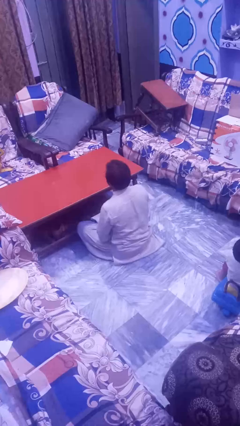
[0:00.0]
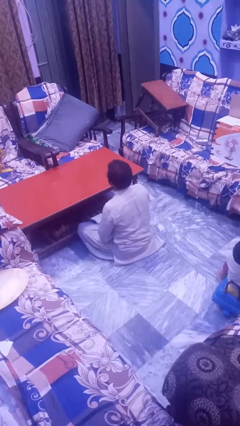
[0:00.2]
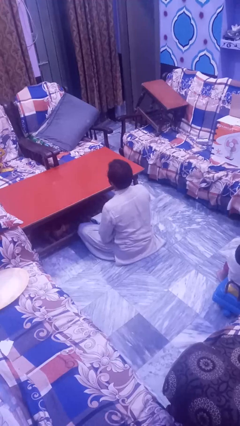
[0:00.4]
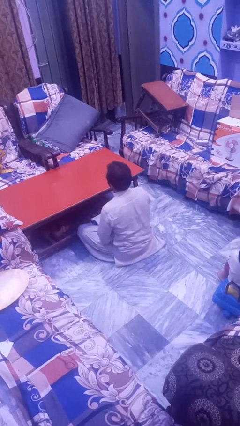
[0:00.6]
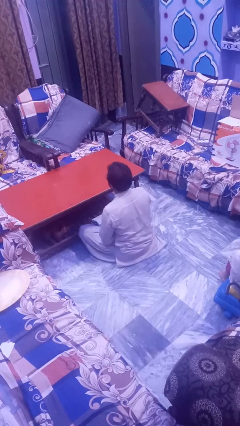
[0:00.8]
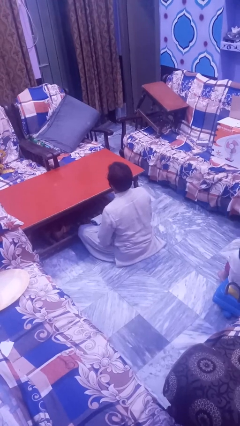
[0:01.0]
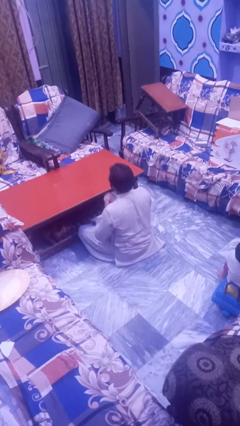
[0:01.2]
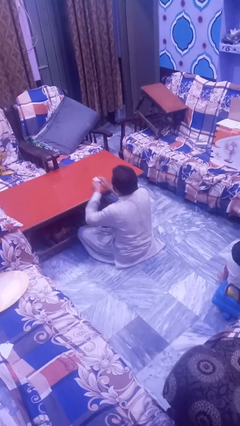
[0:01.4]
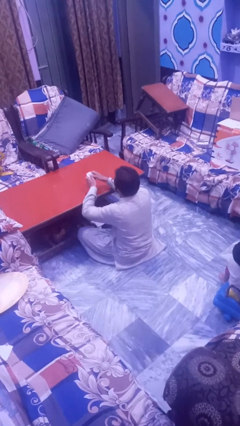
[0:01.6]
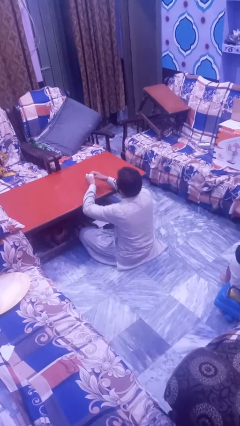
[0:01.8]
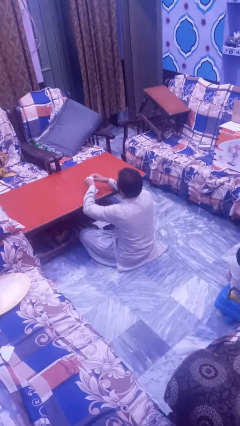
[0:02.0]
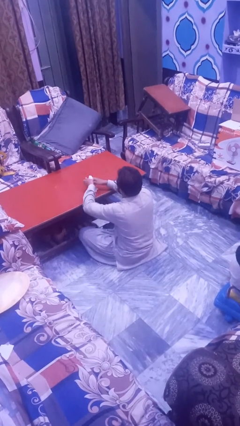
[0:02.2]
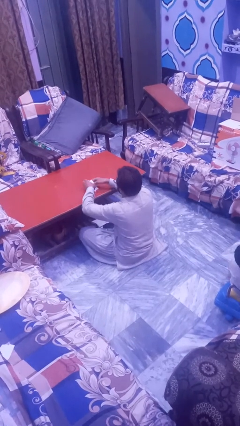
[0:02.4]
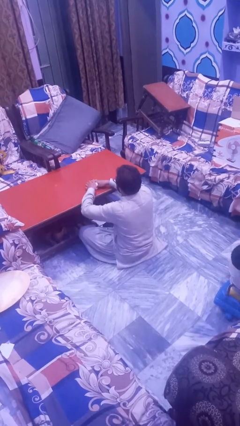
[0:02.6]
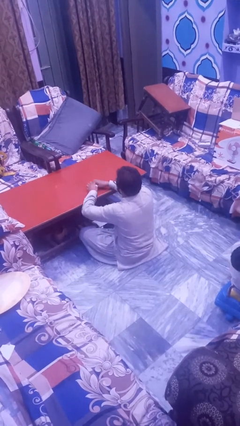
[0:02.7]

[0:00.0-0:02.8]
person crumples paper

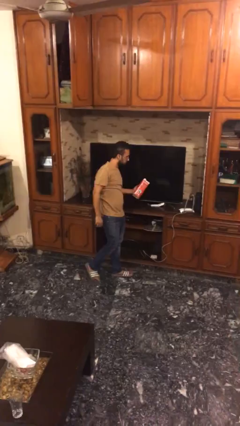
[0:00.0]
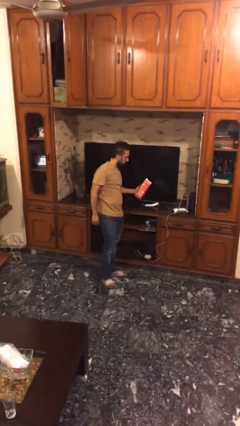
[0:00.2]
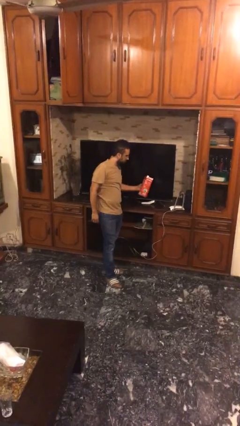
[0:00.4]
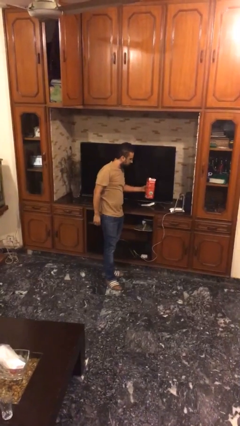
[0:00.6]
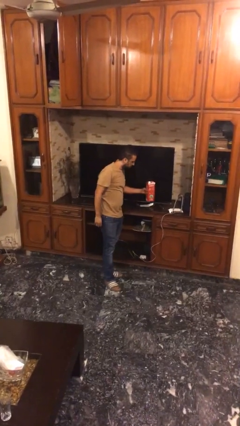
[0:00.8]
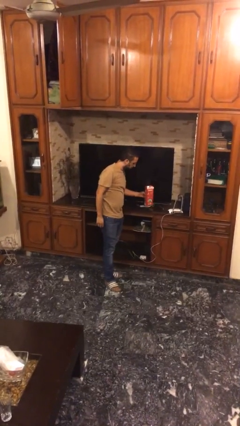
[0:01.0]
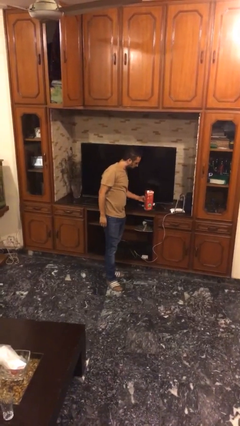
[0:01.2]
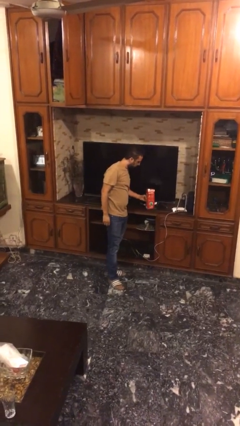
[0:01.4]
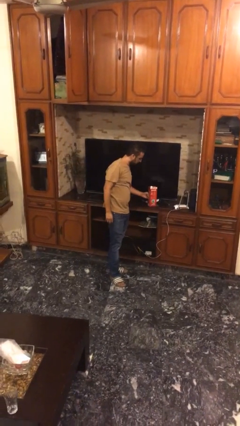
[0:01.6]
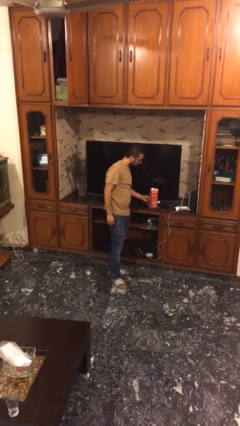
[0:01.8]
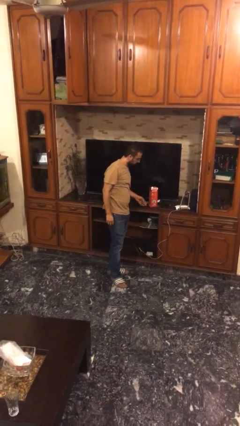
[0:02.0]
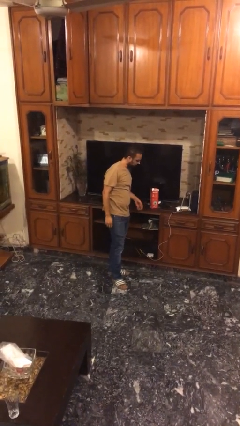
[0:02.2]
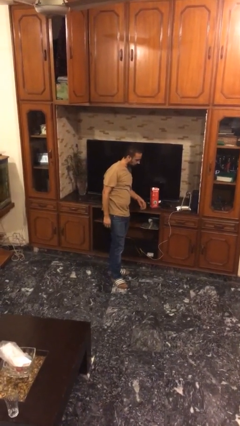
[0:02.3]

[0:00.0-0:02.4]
person puts down object on table

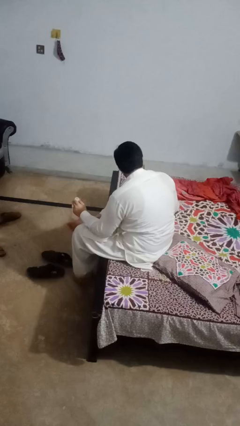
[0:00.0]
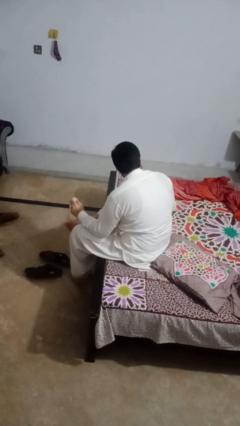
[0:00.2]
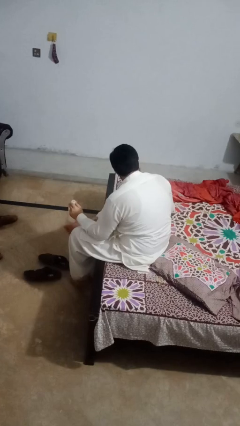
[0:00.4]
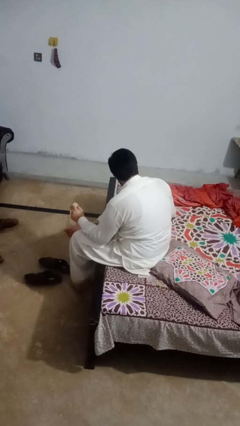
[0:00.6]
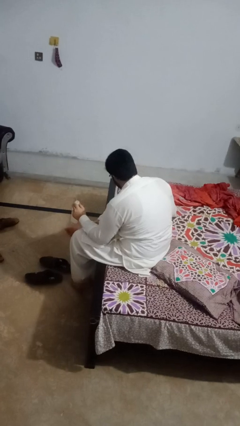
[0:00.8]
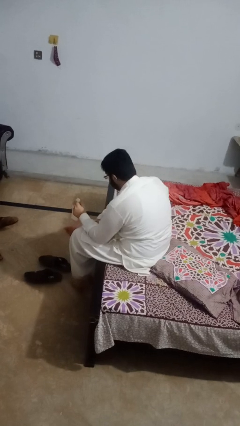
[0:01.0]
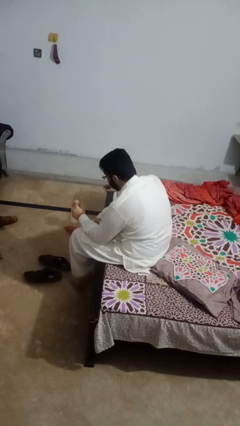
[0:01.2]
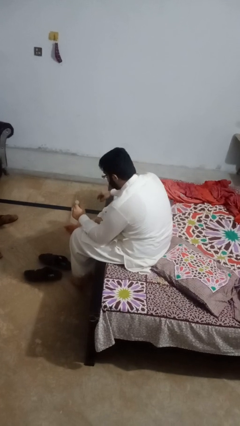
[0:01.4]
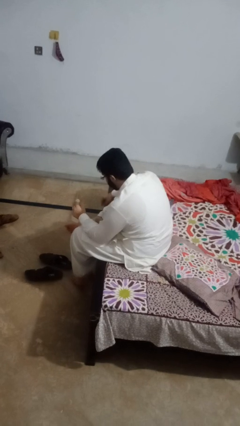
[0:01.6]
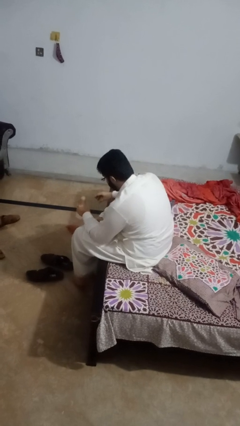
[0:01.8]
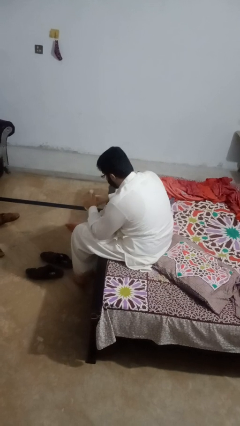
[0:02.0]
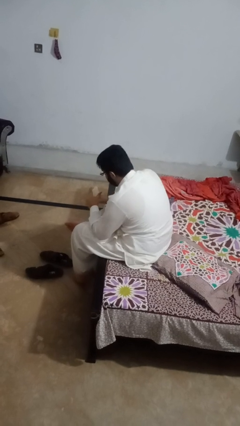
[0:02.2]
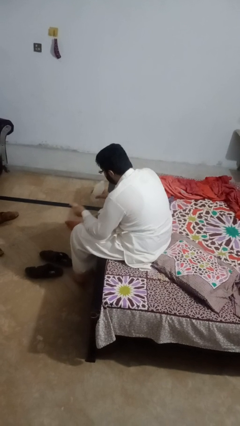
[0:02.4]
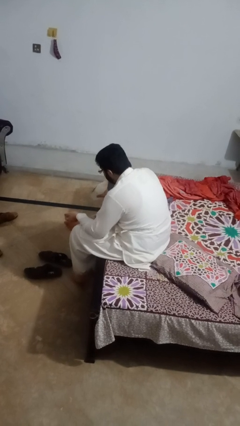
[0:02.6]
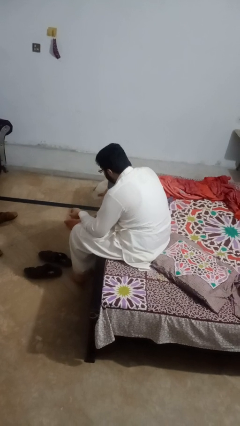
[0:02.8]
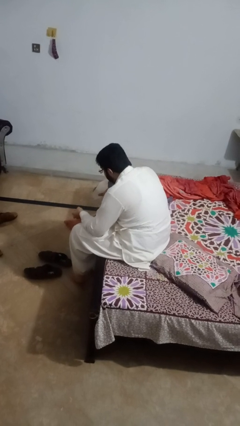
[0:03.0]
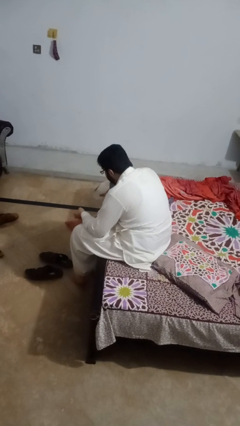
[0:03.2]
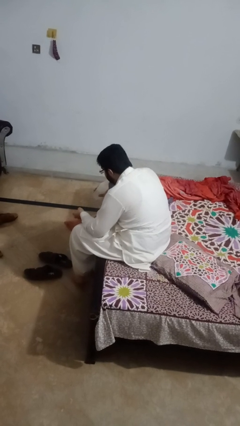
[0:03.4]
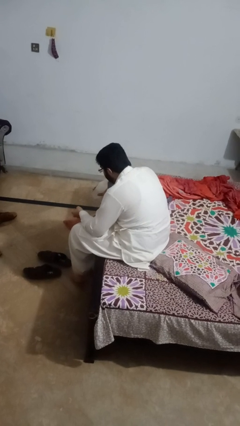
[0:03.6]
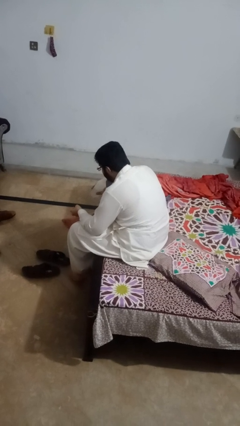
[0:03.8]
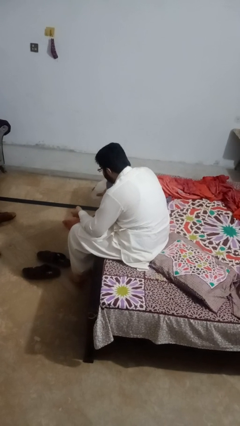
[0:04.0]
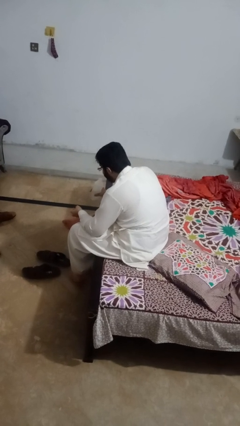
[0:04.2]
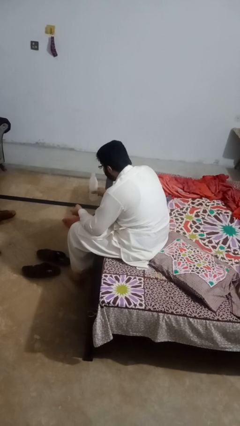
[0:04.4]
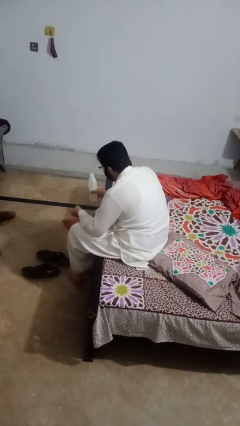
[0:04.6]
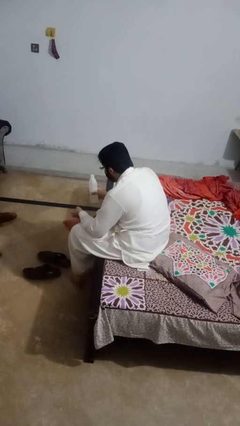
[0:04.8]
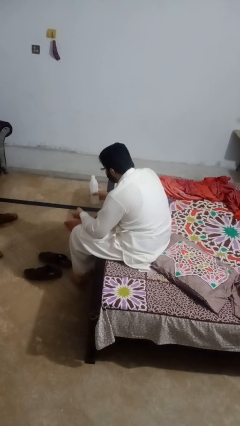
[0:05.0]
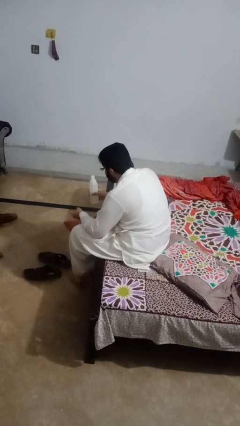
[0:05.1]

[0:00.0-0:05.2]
person drinks from straw

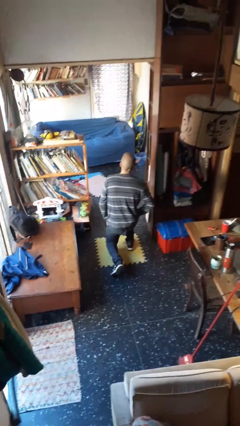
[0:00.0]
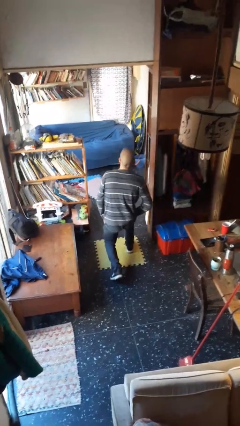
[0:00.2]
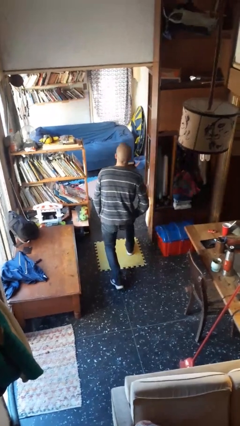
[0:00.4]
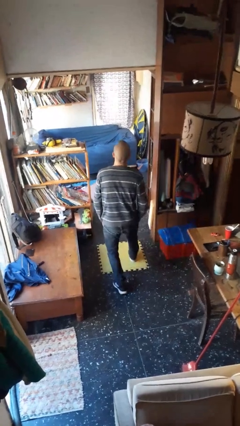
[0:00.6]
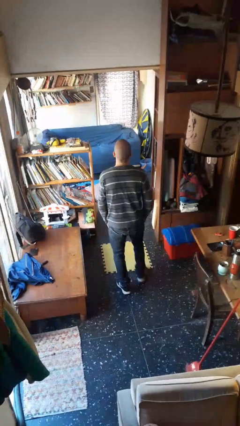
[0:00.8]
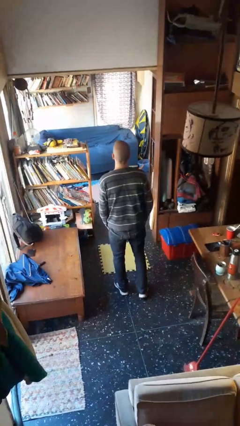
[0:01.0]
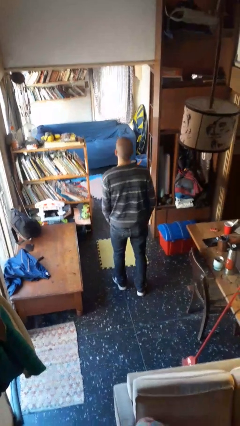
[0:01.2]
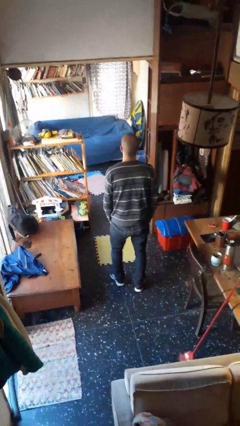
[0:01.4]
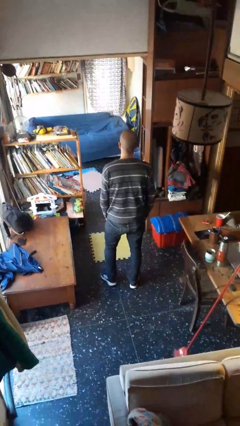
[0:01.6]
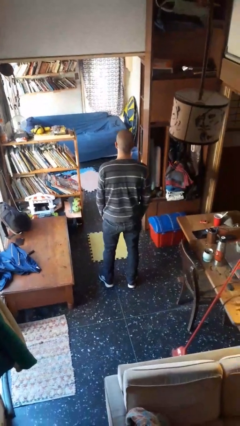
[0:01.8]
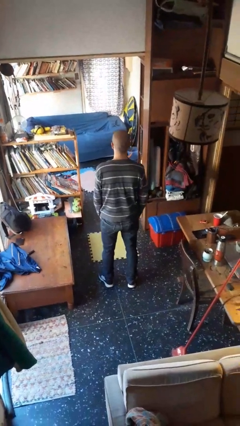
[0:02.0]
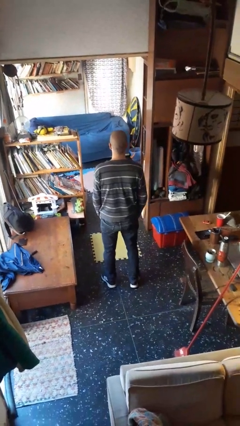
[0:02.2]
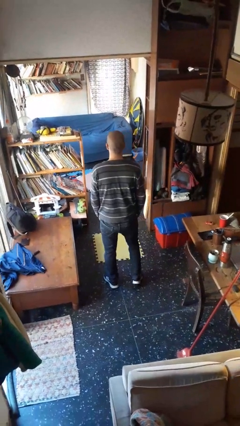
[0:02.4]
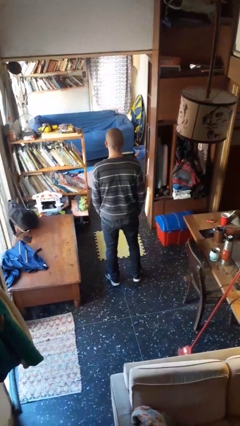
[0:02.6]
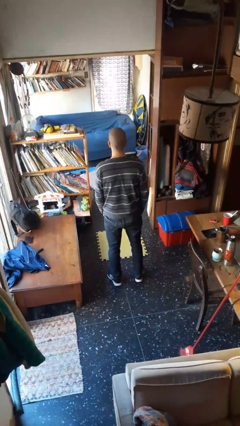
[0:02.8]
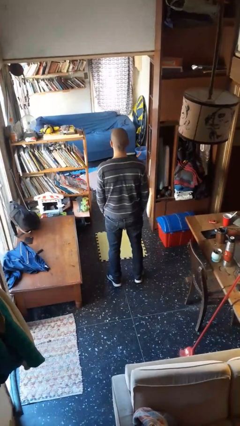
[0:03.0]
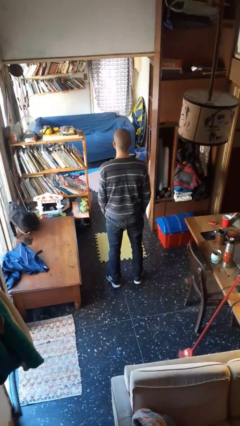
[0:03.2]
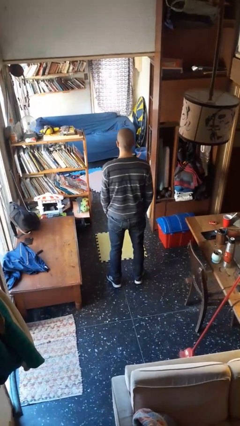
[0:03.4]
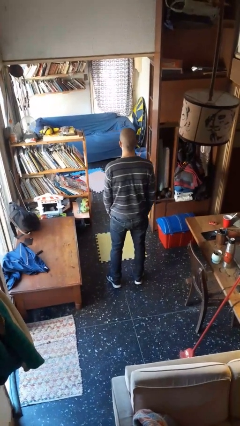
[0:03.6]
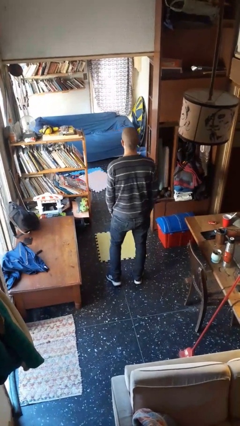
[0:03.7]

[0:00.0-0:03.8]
person stands up from floor

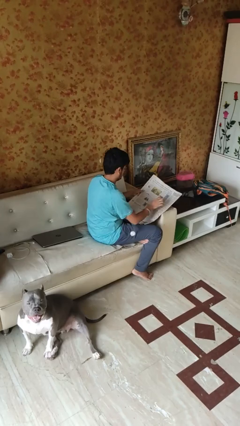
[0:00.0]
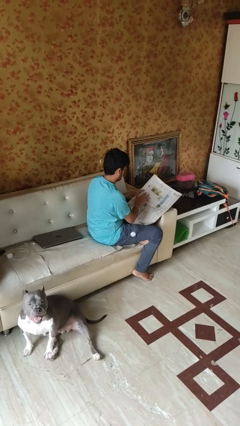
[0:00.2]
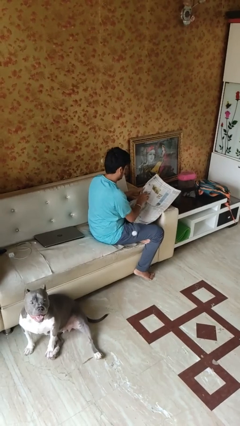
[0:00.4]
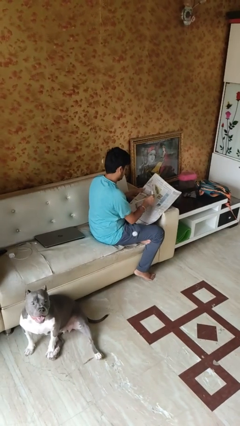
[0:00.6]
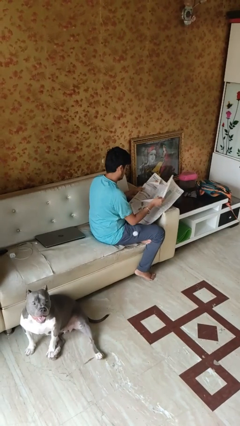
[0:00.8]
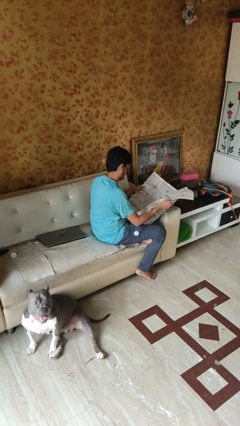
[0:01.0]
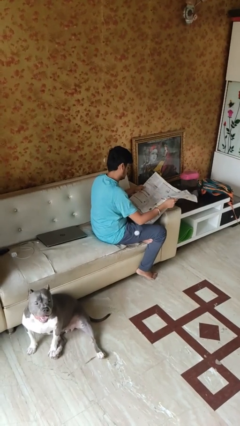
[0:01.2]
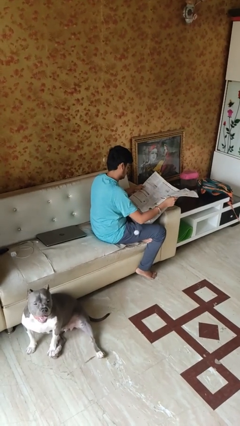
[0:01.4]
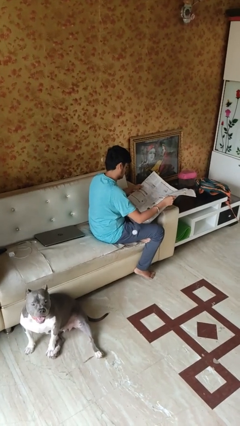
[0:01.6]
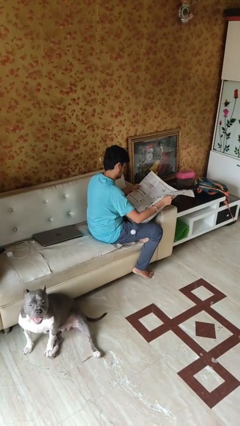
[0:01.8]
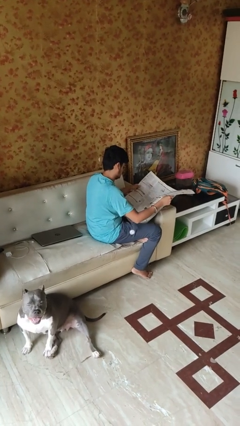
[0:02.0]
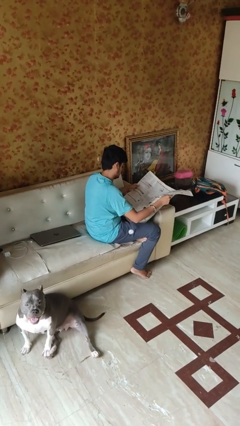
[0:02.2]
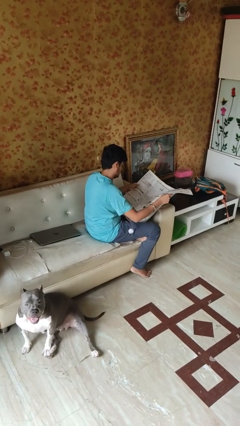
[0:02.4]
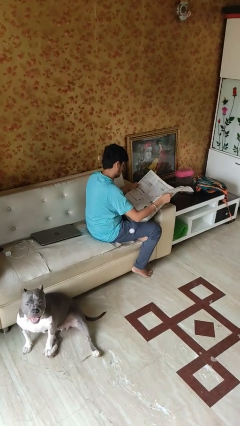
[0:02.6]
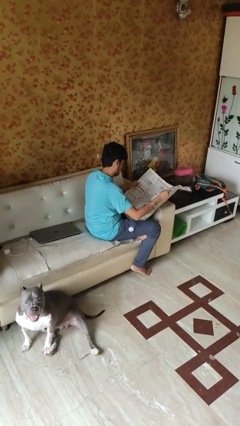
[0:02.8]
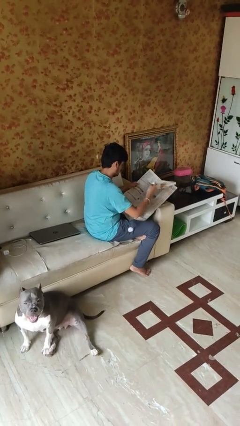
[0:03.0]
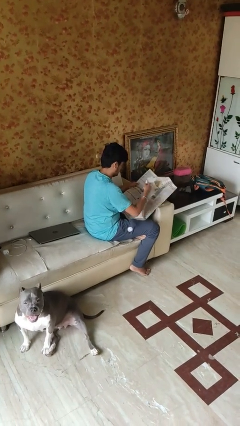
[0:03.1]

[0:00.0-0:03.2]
person reads newspaper
